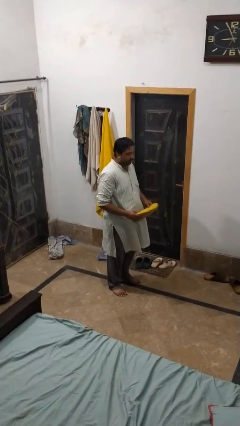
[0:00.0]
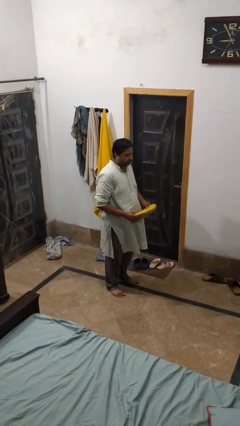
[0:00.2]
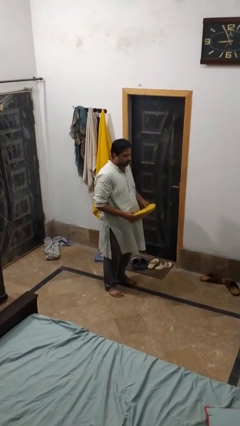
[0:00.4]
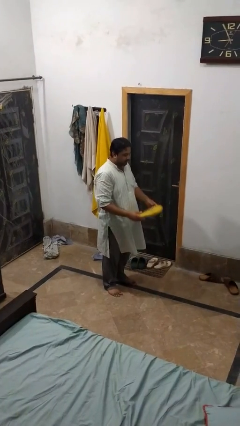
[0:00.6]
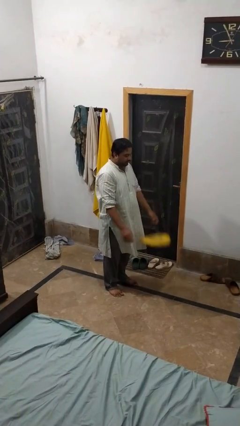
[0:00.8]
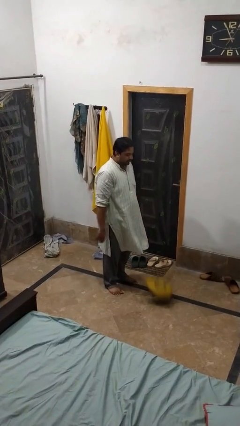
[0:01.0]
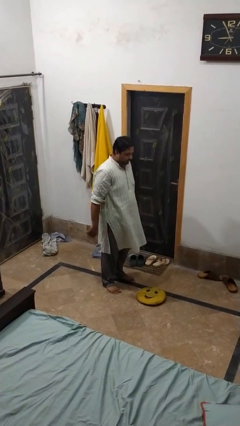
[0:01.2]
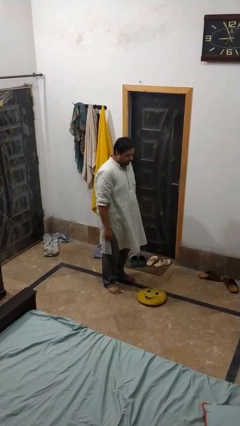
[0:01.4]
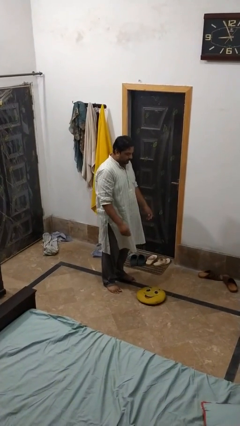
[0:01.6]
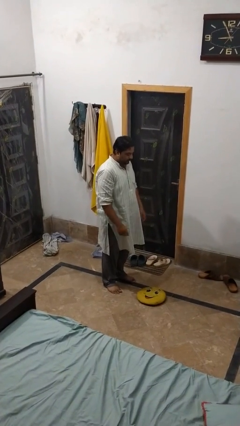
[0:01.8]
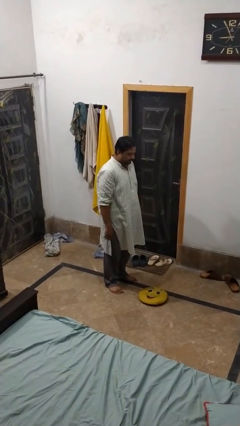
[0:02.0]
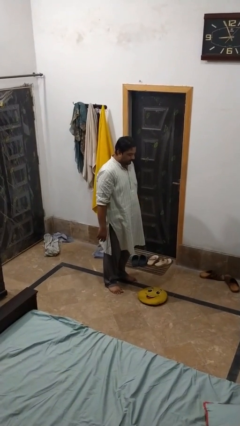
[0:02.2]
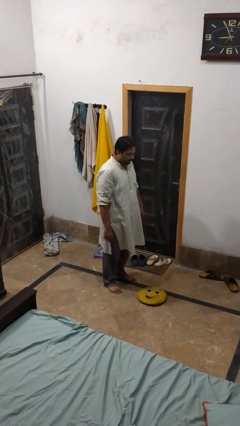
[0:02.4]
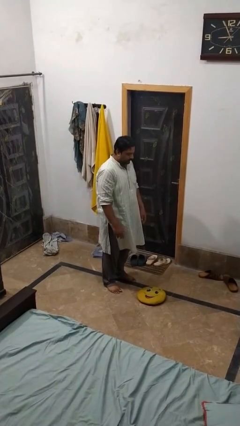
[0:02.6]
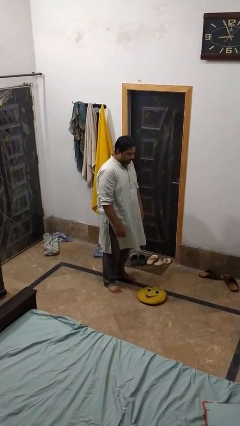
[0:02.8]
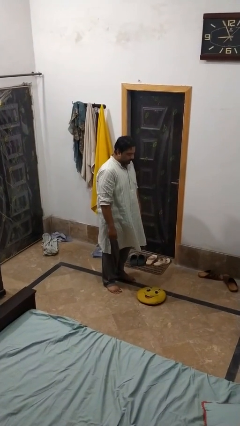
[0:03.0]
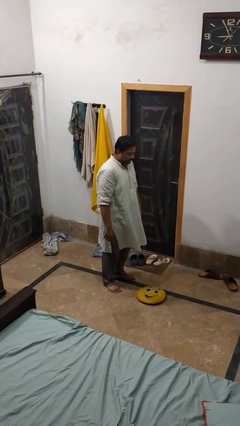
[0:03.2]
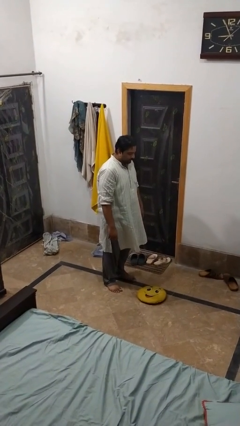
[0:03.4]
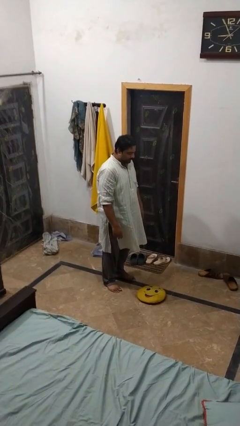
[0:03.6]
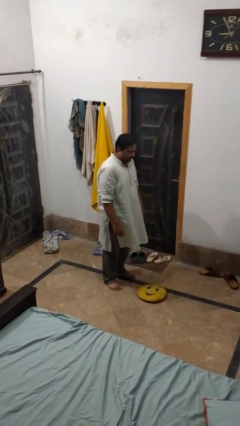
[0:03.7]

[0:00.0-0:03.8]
person throws object to ground

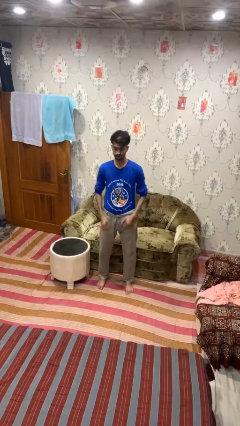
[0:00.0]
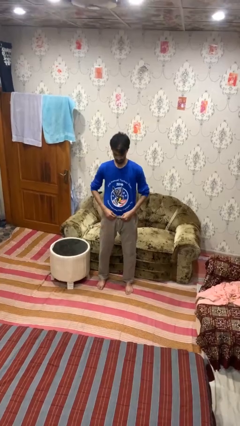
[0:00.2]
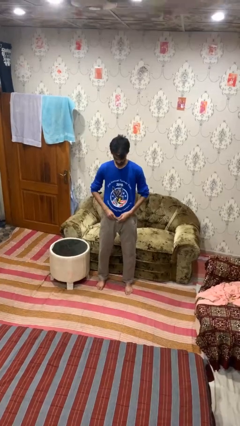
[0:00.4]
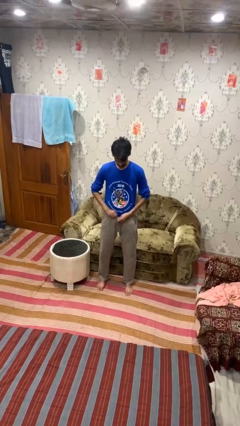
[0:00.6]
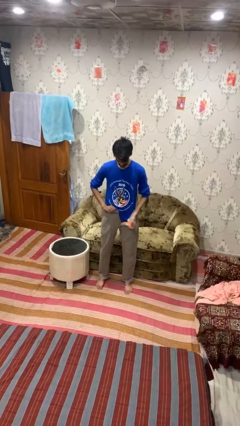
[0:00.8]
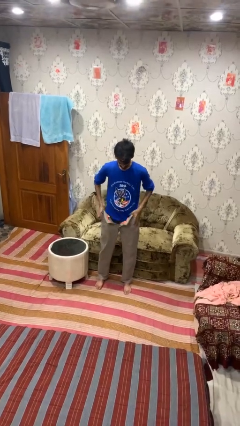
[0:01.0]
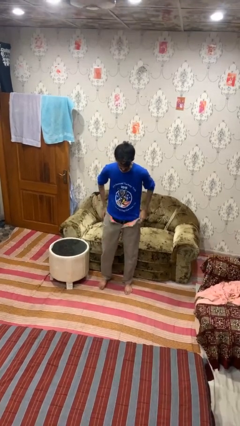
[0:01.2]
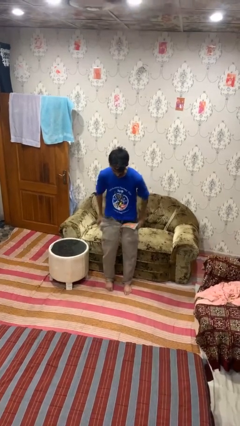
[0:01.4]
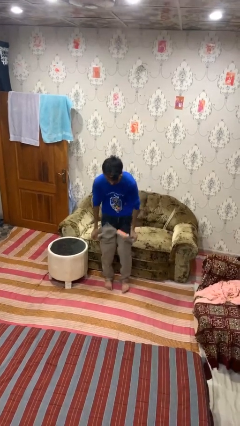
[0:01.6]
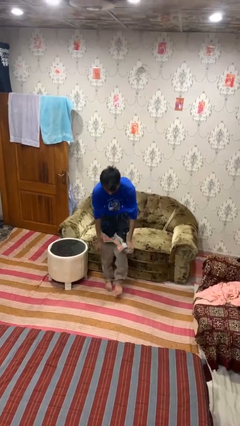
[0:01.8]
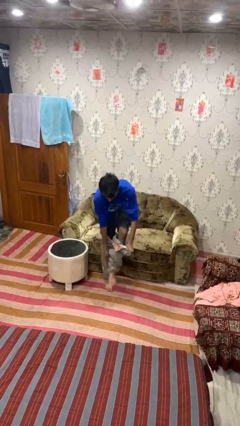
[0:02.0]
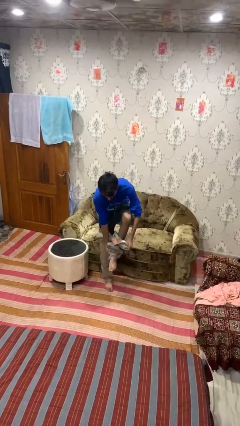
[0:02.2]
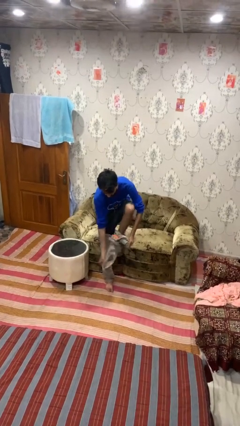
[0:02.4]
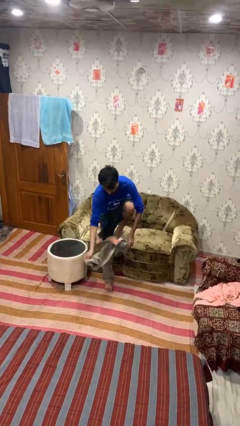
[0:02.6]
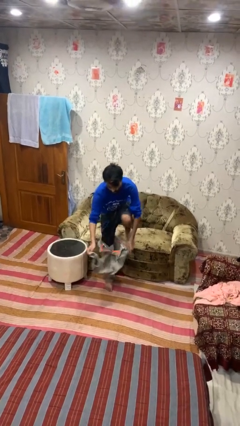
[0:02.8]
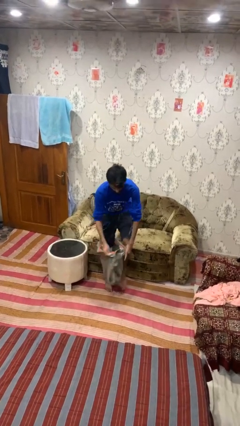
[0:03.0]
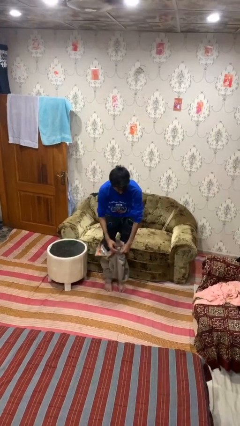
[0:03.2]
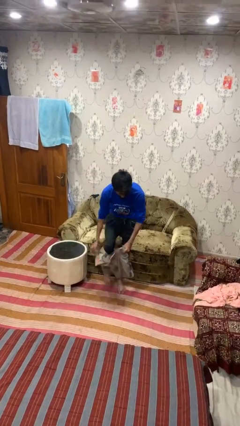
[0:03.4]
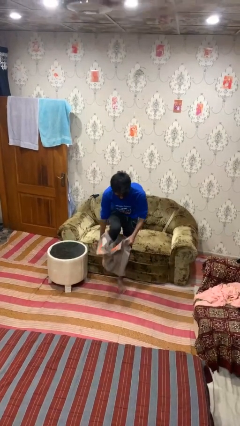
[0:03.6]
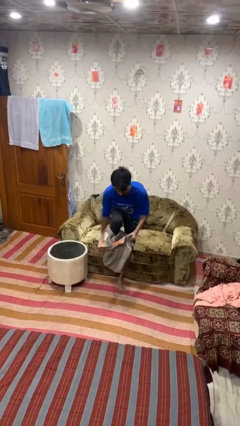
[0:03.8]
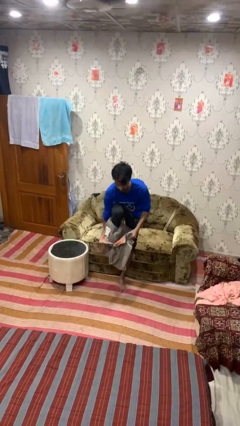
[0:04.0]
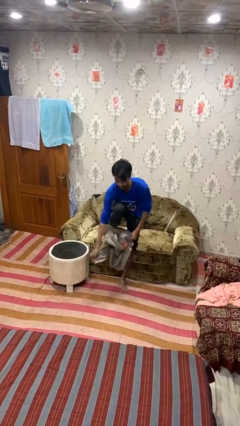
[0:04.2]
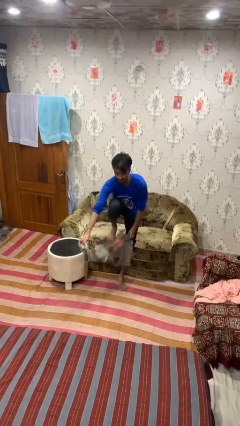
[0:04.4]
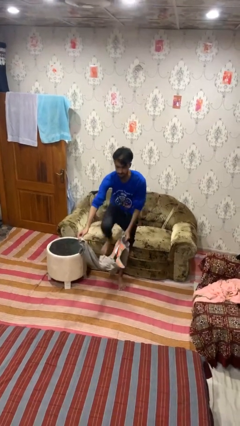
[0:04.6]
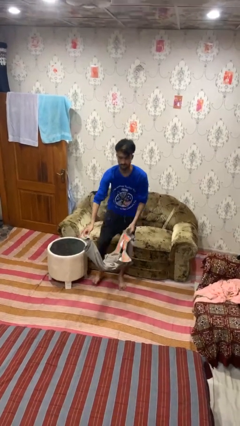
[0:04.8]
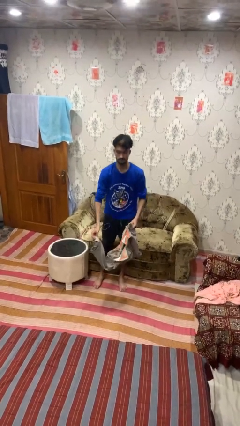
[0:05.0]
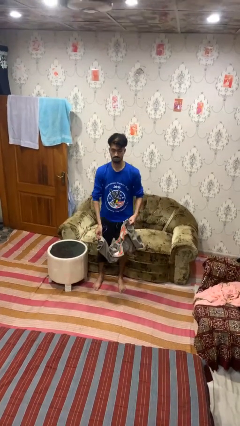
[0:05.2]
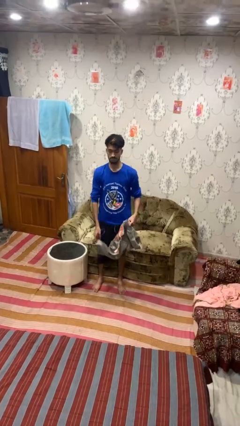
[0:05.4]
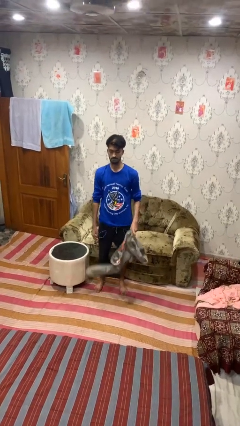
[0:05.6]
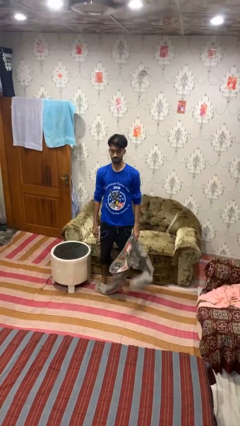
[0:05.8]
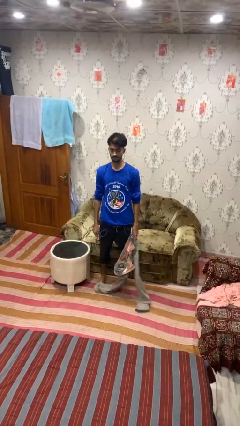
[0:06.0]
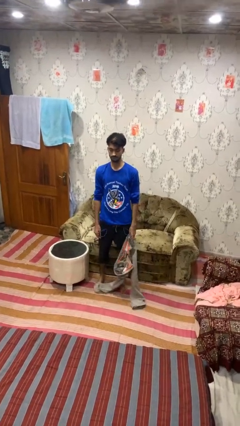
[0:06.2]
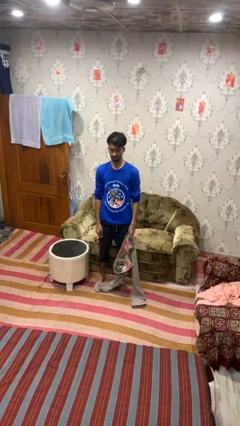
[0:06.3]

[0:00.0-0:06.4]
person takes off pants

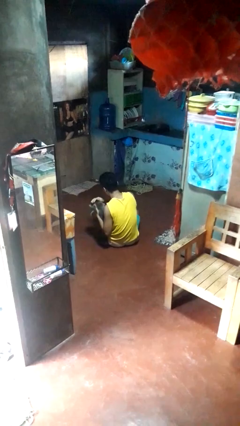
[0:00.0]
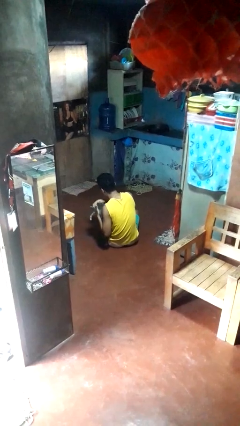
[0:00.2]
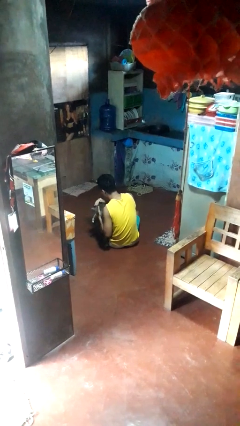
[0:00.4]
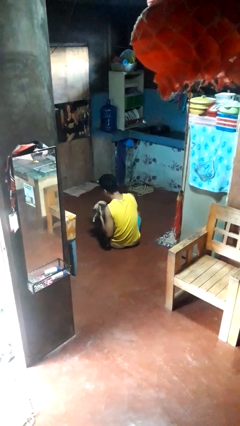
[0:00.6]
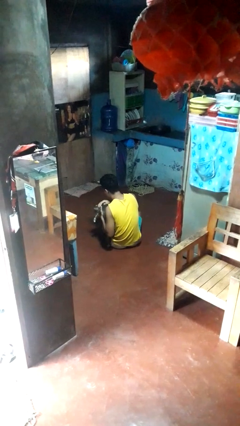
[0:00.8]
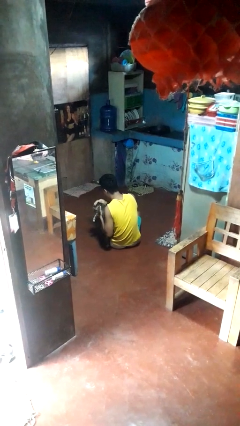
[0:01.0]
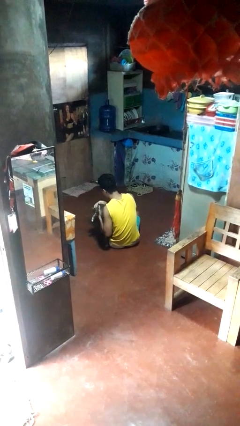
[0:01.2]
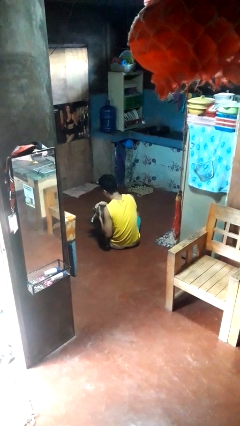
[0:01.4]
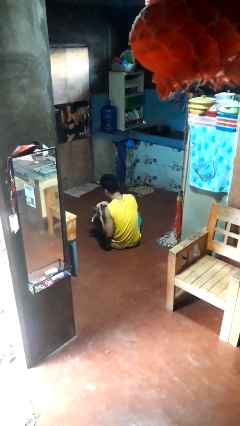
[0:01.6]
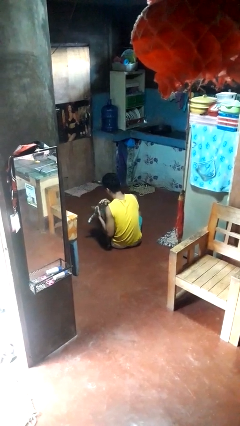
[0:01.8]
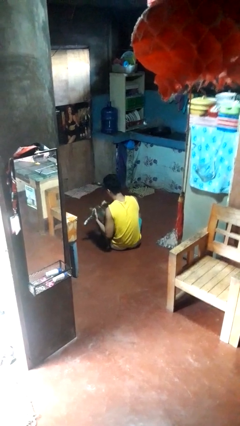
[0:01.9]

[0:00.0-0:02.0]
person hugs cat

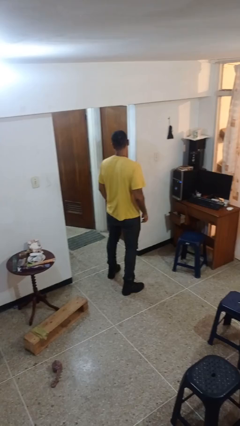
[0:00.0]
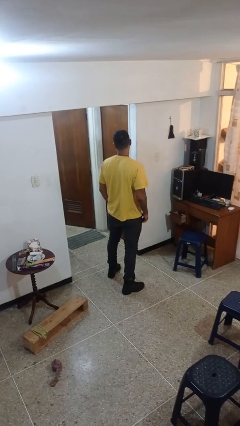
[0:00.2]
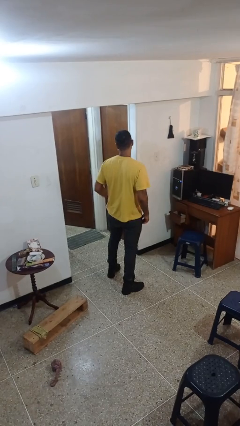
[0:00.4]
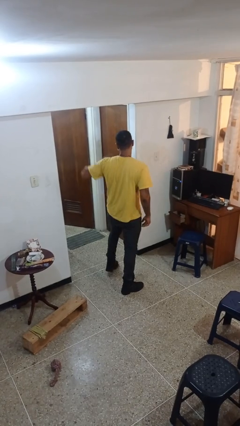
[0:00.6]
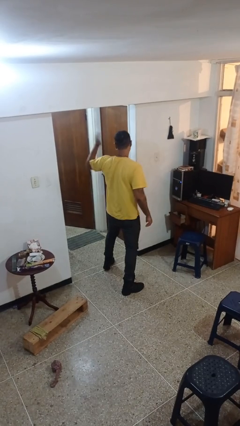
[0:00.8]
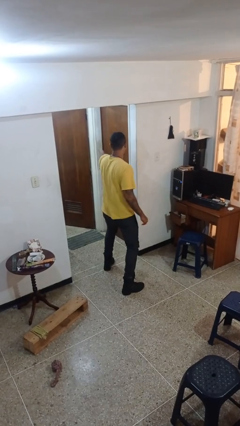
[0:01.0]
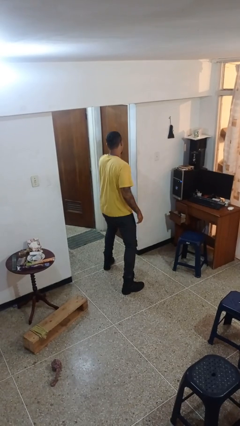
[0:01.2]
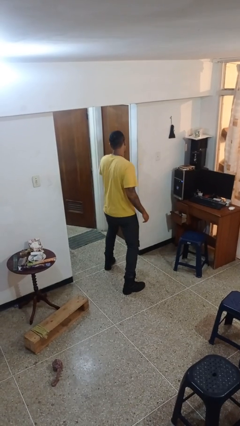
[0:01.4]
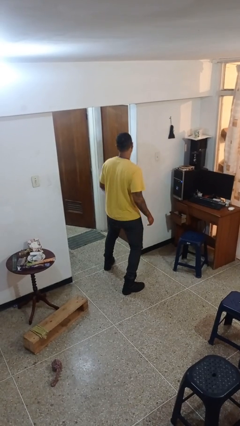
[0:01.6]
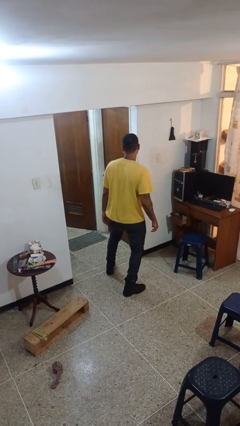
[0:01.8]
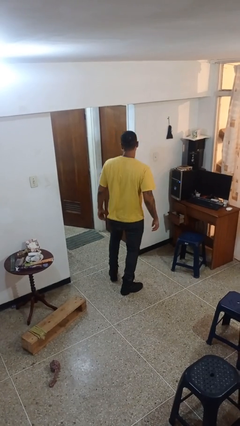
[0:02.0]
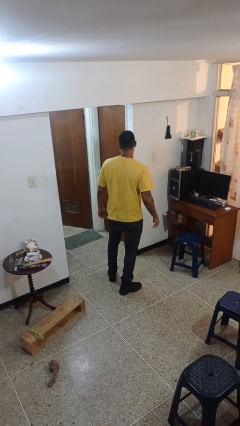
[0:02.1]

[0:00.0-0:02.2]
person karate chop

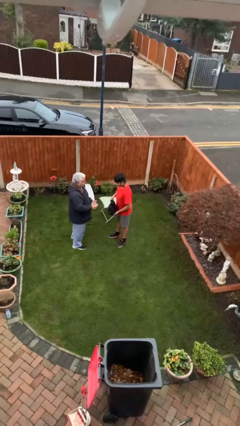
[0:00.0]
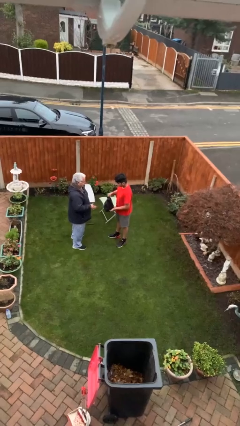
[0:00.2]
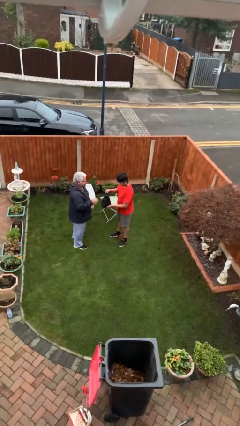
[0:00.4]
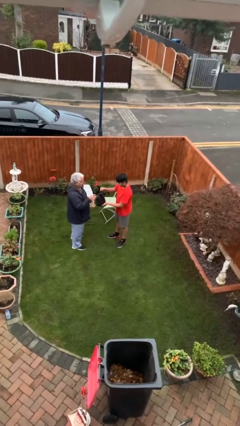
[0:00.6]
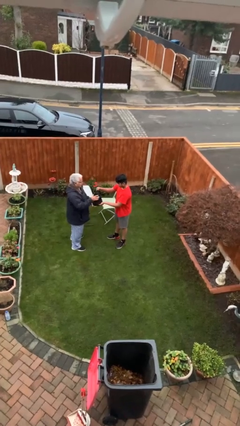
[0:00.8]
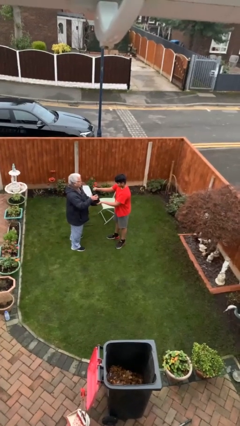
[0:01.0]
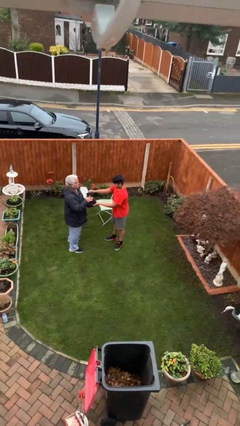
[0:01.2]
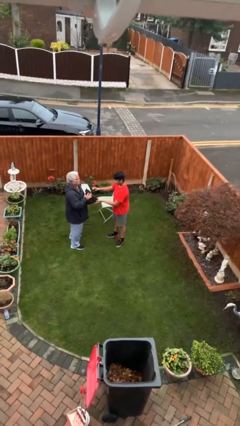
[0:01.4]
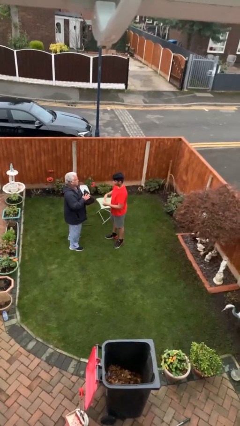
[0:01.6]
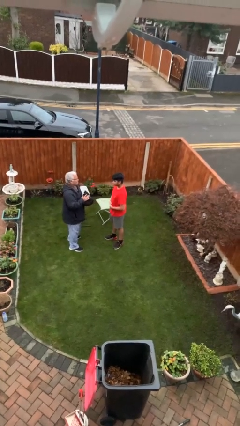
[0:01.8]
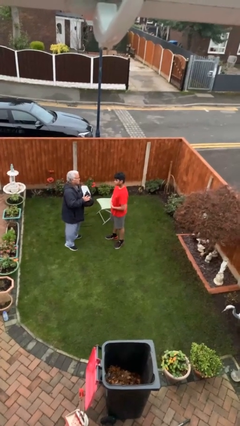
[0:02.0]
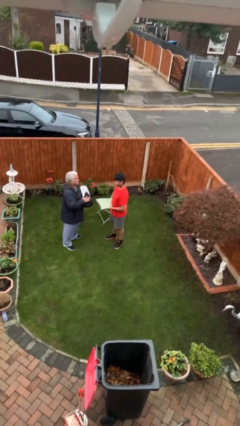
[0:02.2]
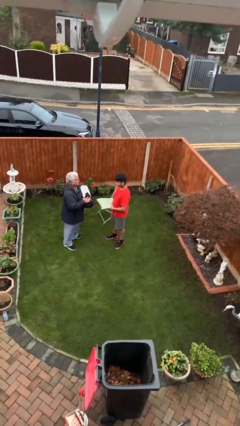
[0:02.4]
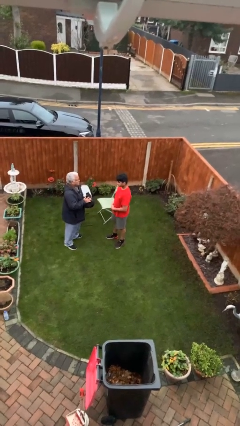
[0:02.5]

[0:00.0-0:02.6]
person transfers object to person

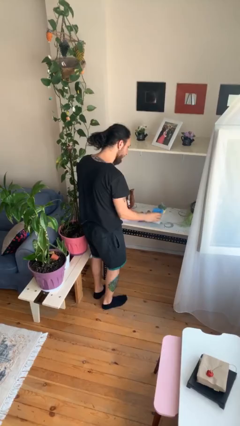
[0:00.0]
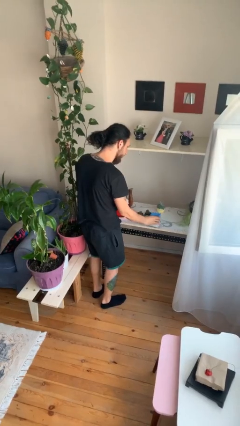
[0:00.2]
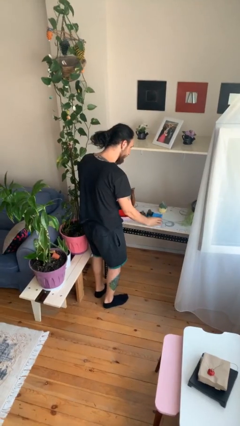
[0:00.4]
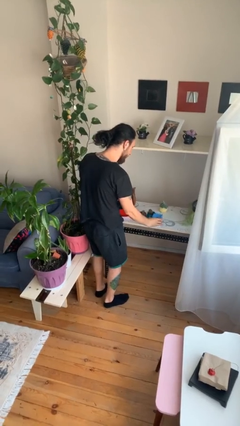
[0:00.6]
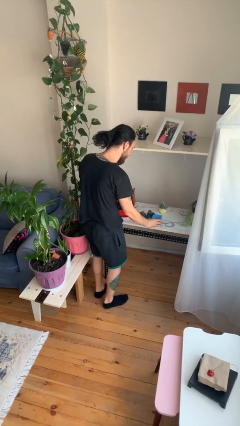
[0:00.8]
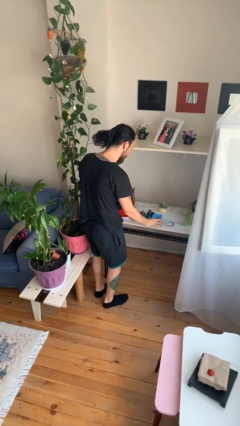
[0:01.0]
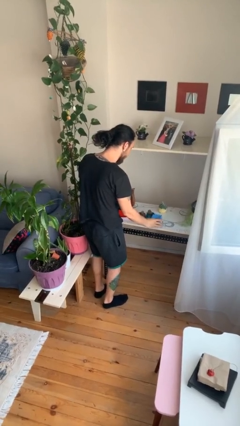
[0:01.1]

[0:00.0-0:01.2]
person puts down object on table
